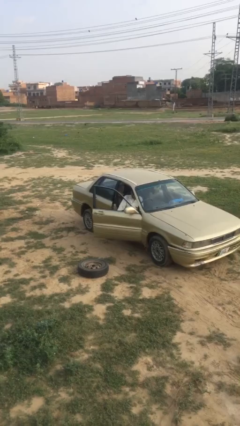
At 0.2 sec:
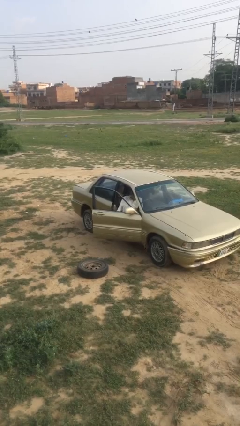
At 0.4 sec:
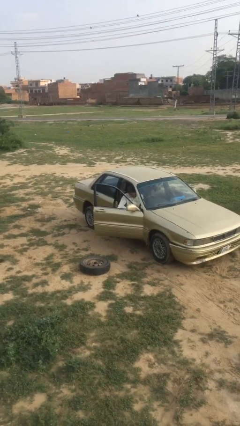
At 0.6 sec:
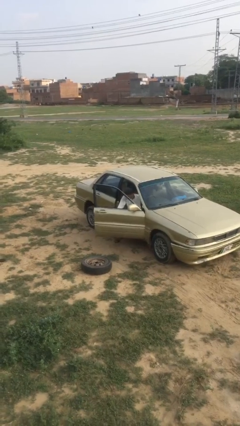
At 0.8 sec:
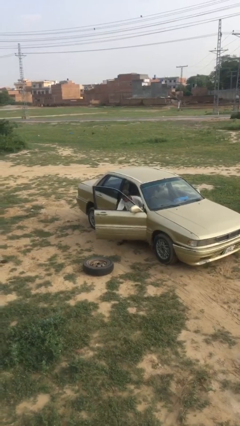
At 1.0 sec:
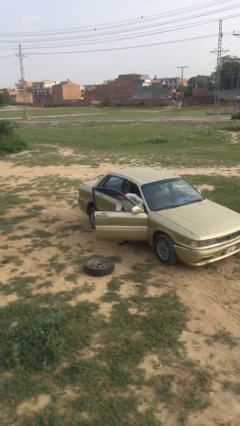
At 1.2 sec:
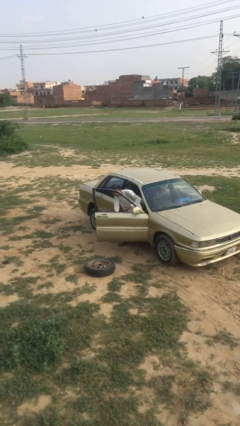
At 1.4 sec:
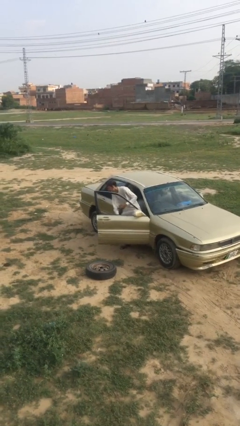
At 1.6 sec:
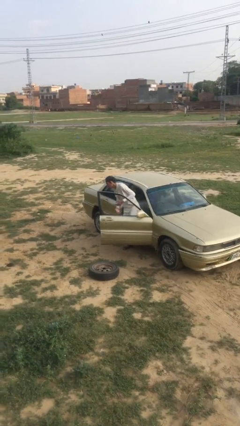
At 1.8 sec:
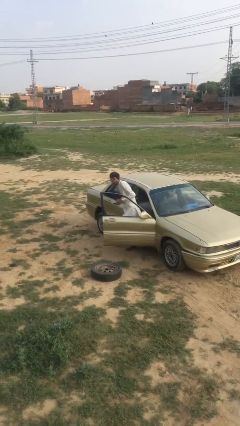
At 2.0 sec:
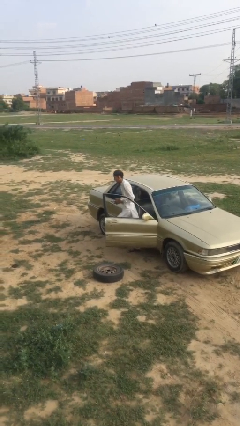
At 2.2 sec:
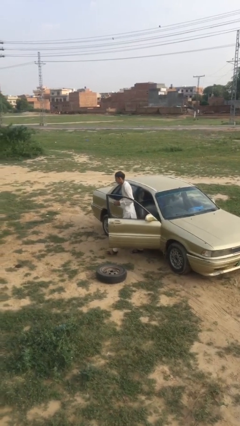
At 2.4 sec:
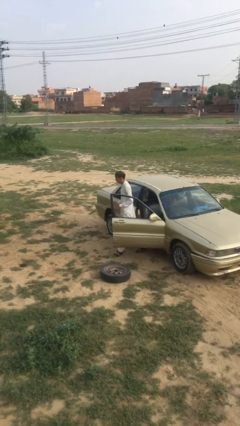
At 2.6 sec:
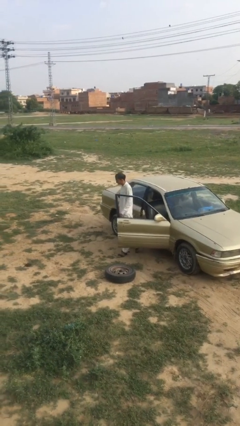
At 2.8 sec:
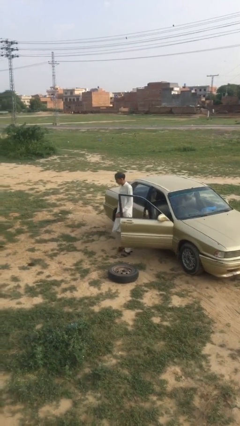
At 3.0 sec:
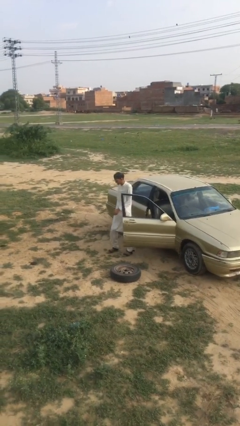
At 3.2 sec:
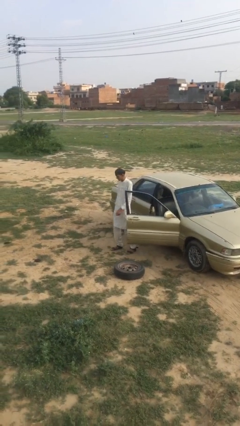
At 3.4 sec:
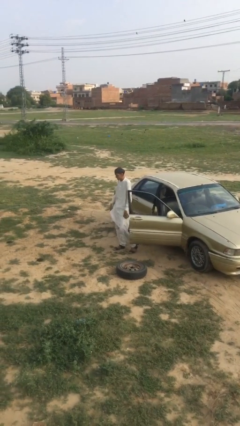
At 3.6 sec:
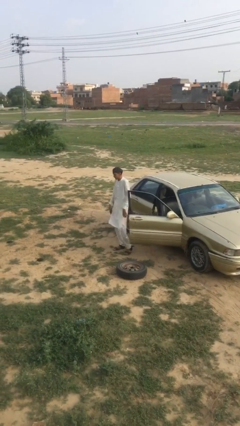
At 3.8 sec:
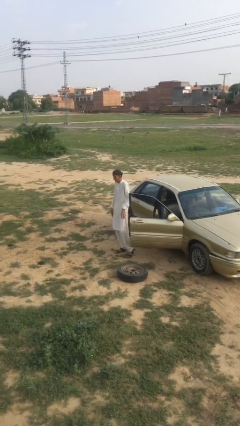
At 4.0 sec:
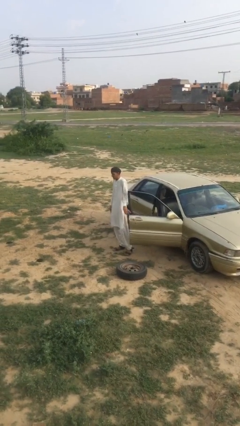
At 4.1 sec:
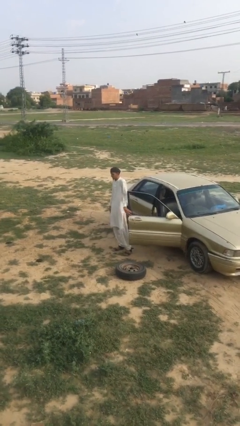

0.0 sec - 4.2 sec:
person exits car

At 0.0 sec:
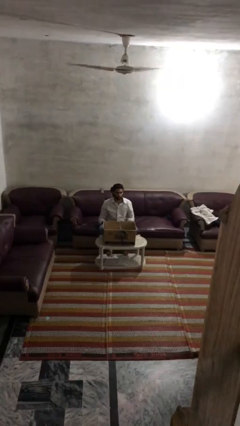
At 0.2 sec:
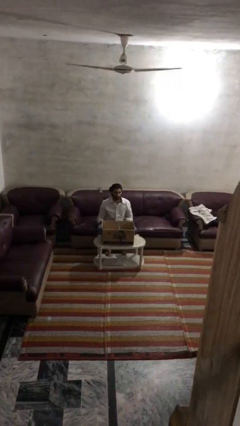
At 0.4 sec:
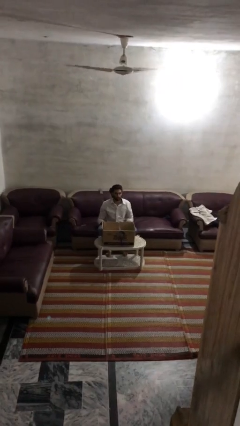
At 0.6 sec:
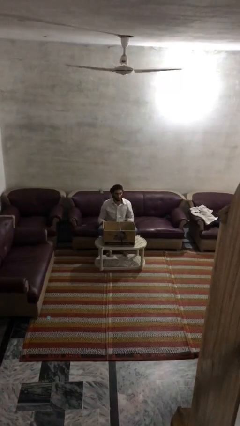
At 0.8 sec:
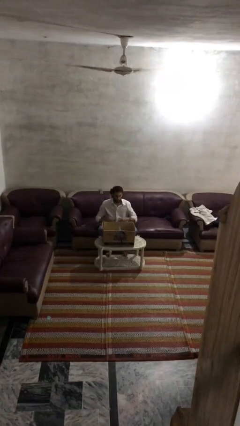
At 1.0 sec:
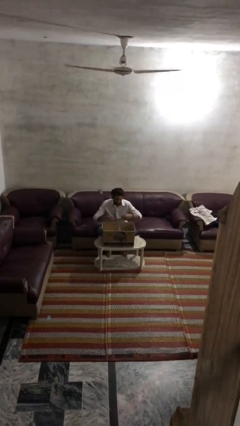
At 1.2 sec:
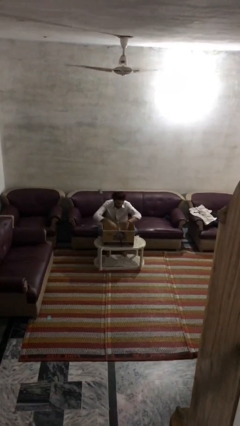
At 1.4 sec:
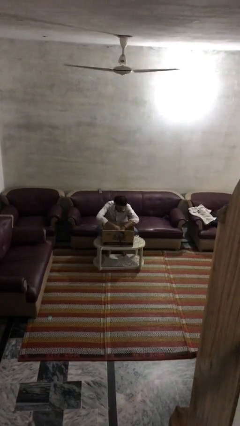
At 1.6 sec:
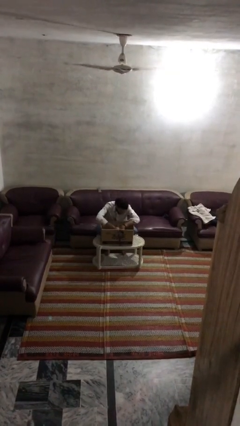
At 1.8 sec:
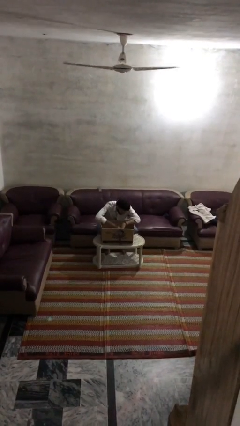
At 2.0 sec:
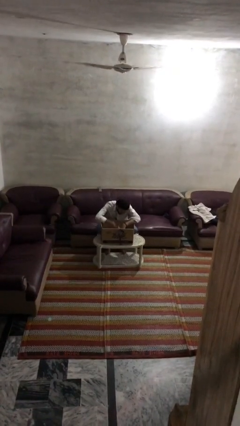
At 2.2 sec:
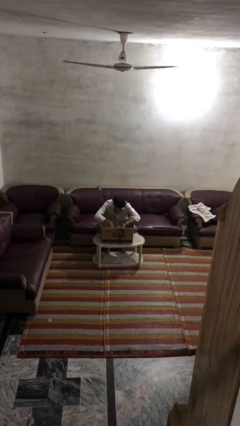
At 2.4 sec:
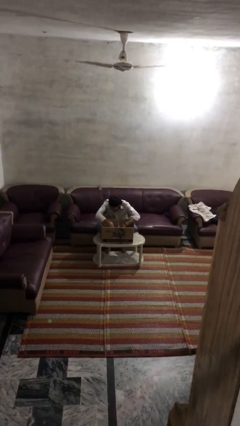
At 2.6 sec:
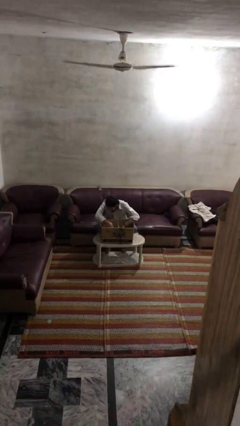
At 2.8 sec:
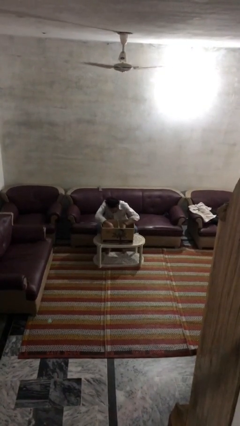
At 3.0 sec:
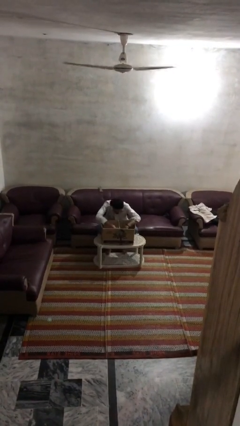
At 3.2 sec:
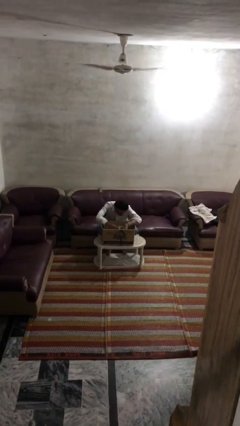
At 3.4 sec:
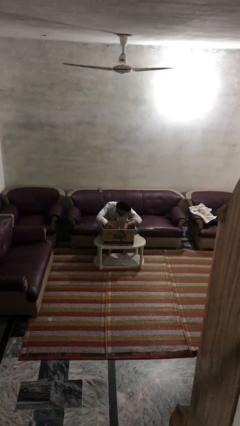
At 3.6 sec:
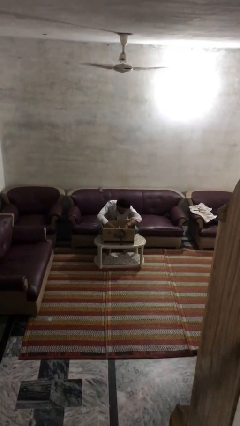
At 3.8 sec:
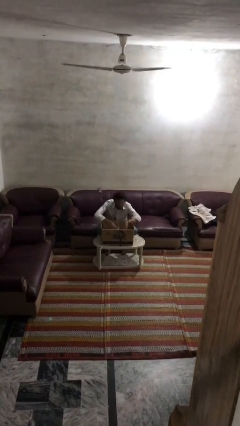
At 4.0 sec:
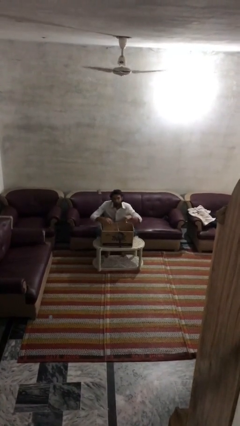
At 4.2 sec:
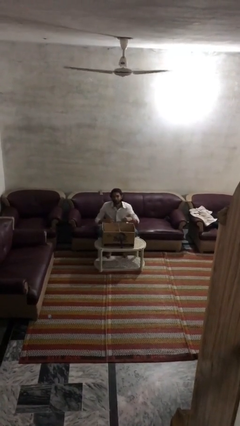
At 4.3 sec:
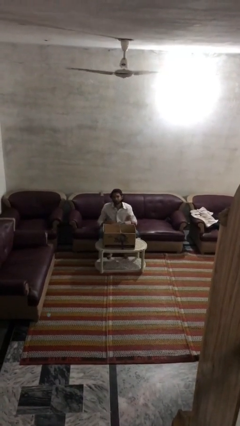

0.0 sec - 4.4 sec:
person searches in box

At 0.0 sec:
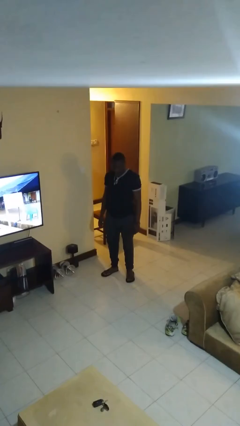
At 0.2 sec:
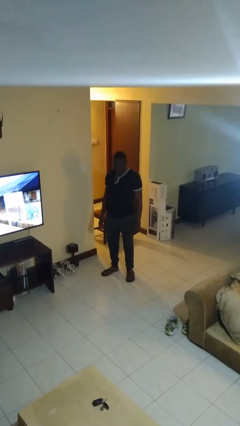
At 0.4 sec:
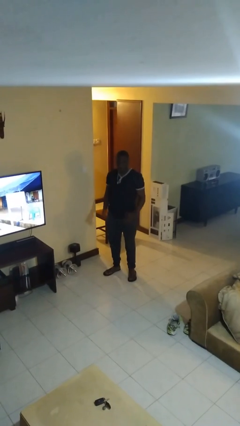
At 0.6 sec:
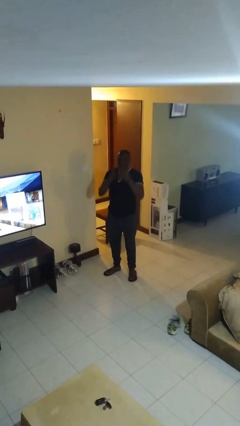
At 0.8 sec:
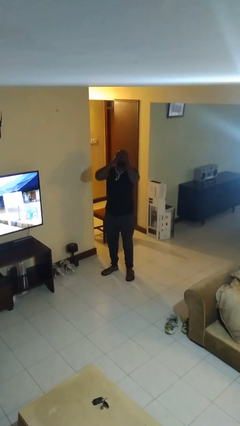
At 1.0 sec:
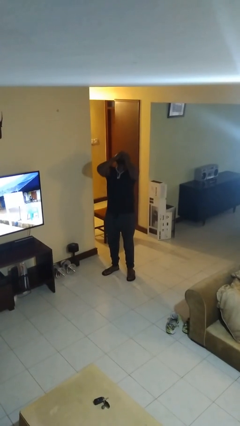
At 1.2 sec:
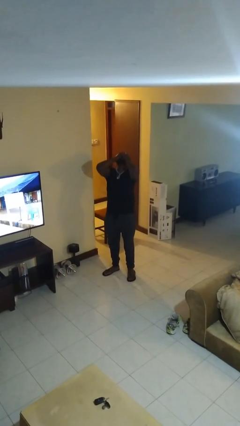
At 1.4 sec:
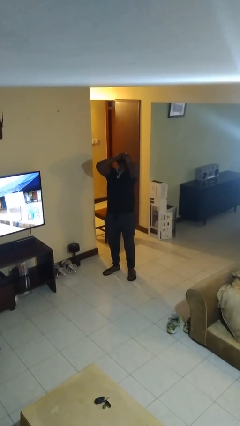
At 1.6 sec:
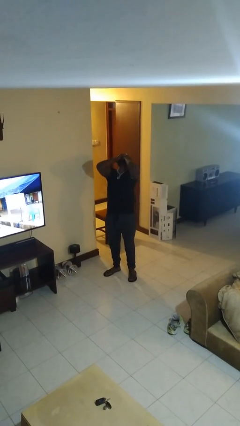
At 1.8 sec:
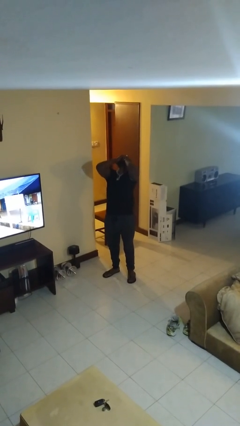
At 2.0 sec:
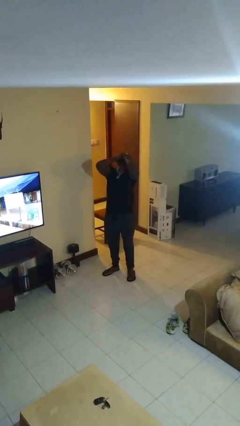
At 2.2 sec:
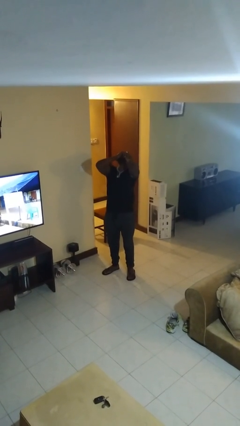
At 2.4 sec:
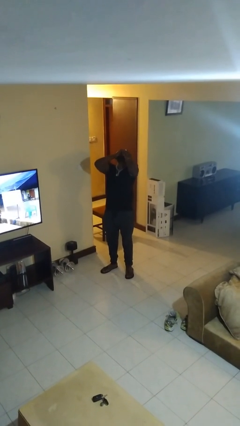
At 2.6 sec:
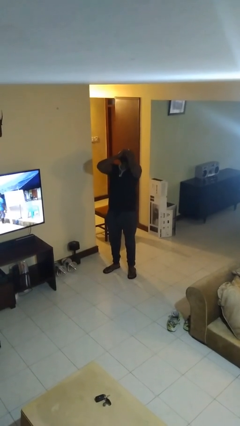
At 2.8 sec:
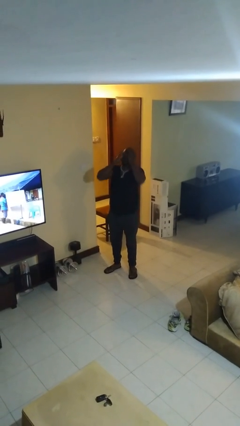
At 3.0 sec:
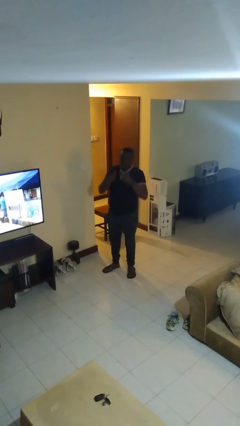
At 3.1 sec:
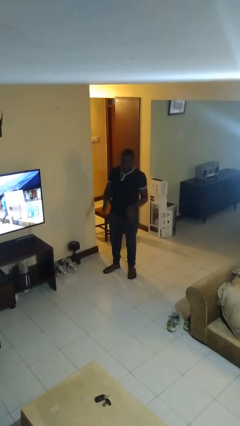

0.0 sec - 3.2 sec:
person covers face with hands

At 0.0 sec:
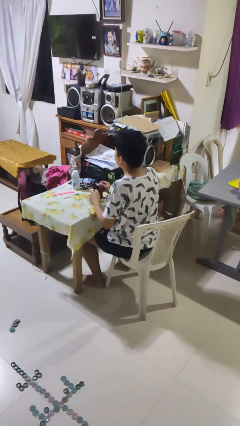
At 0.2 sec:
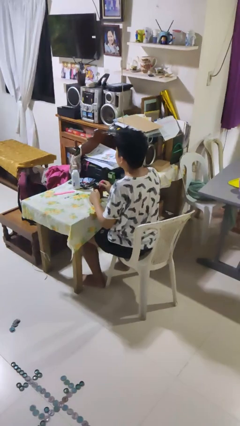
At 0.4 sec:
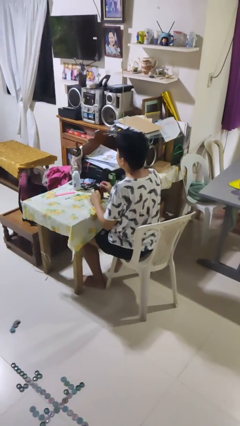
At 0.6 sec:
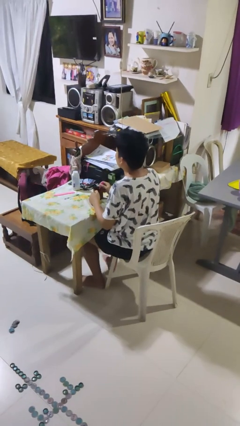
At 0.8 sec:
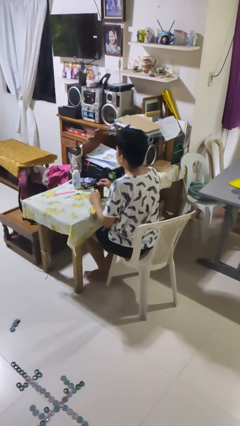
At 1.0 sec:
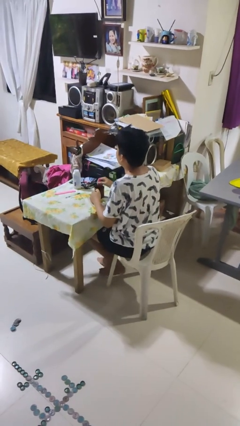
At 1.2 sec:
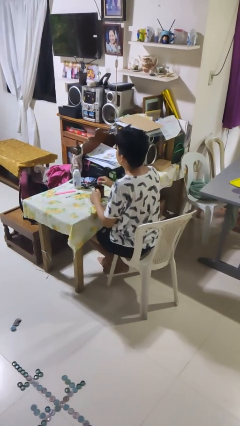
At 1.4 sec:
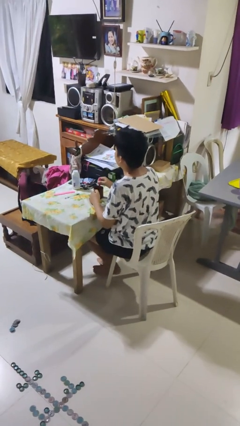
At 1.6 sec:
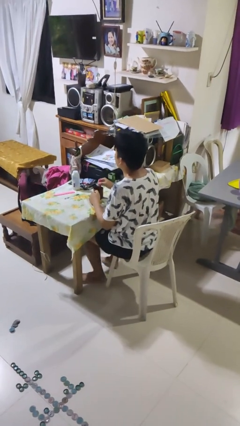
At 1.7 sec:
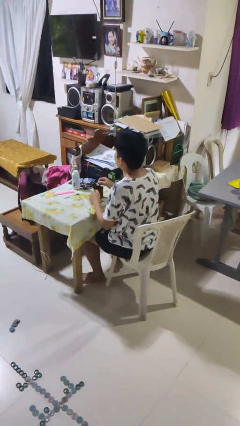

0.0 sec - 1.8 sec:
person stirs mug

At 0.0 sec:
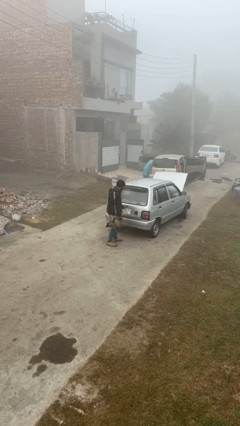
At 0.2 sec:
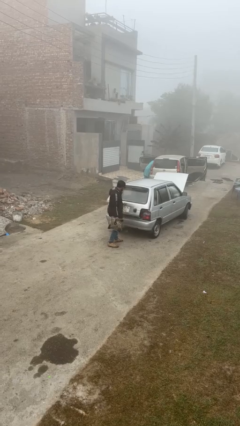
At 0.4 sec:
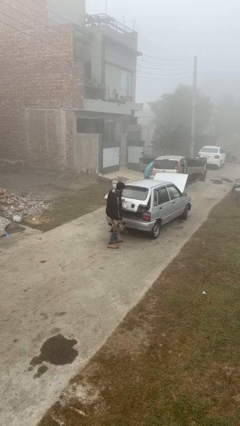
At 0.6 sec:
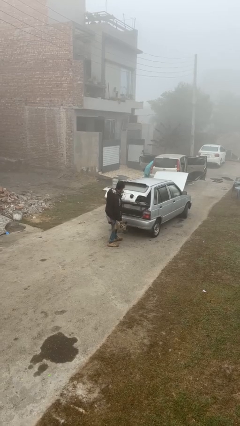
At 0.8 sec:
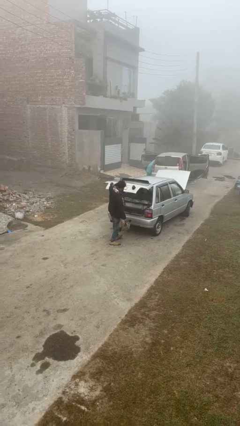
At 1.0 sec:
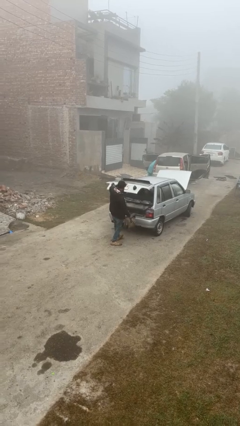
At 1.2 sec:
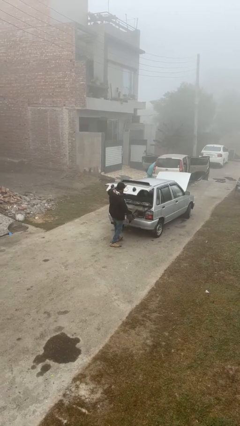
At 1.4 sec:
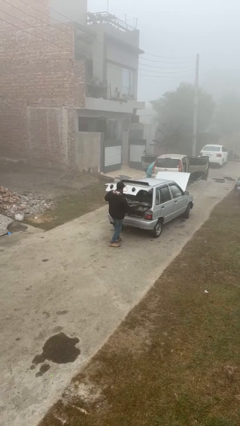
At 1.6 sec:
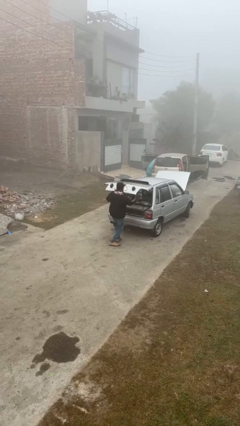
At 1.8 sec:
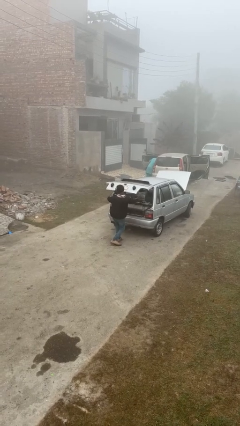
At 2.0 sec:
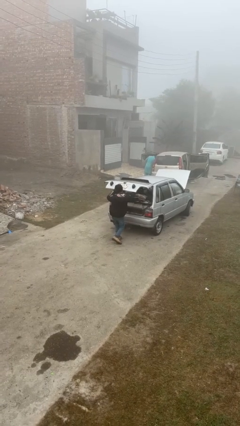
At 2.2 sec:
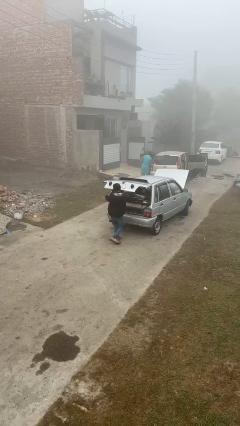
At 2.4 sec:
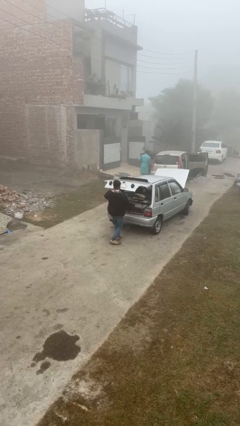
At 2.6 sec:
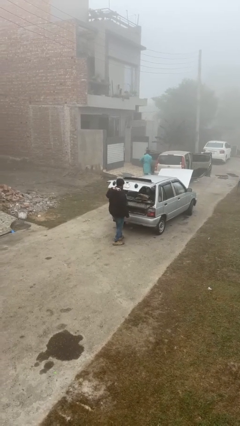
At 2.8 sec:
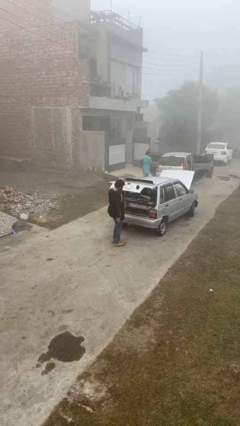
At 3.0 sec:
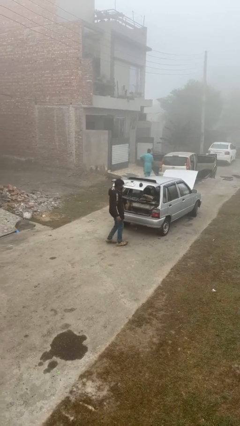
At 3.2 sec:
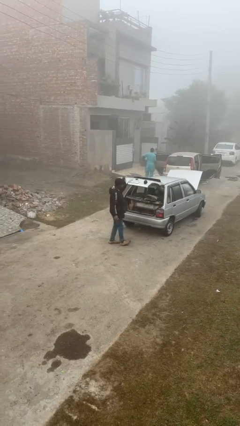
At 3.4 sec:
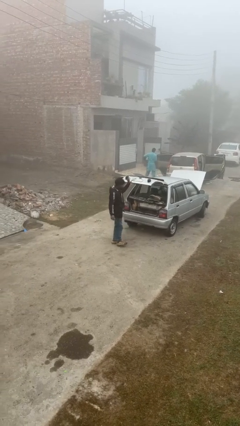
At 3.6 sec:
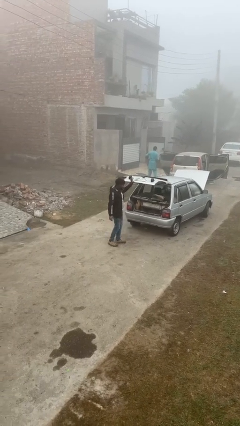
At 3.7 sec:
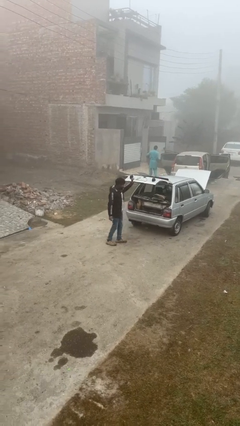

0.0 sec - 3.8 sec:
person loads car
